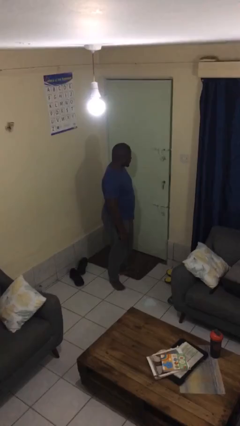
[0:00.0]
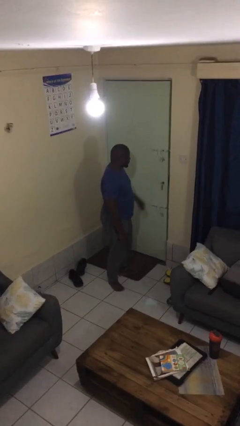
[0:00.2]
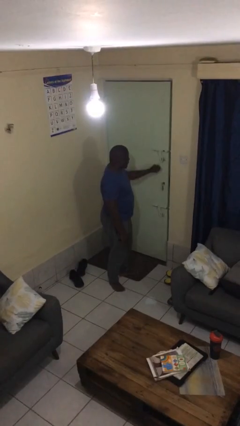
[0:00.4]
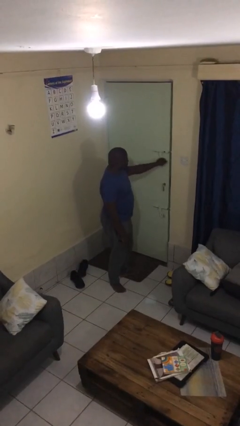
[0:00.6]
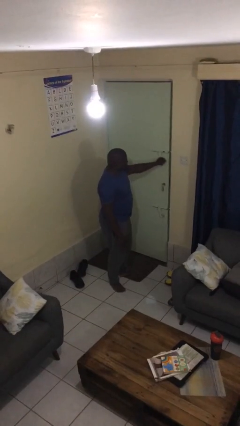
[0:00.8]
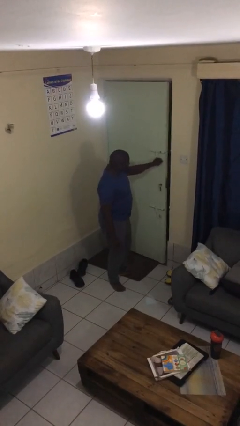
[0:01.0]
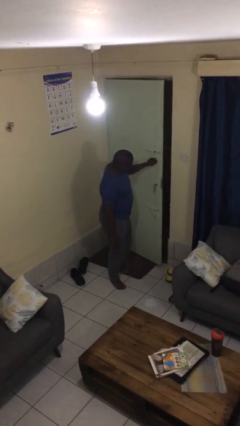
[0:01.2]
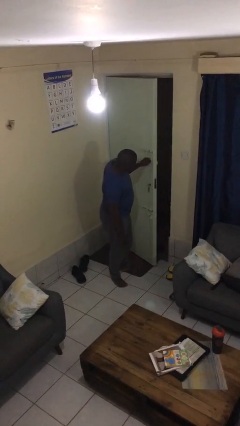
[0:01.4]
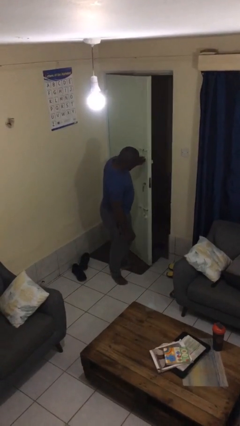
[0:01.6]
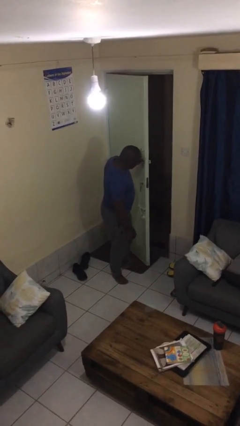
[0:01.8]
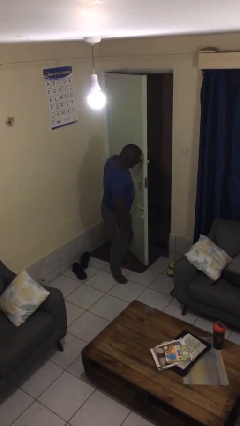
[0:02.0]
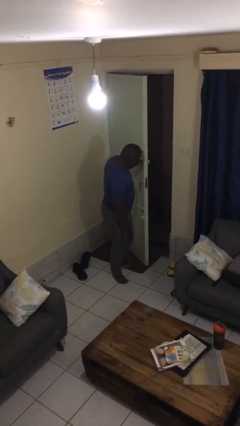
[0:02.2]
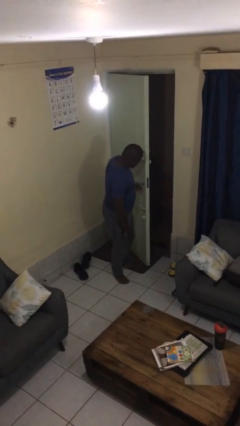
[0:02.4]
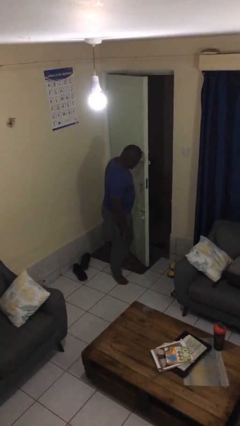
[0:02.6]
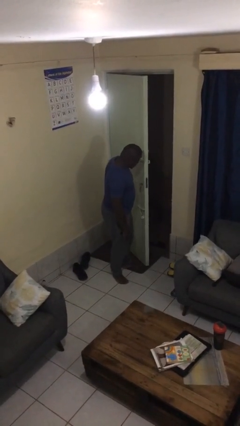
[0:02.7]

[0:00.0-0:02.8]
person opens facility door

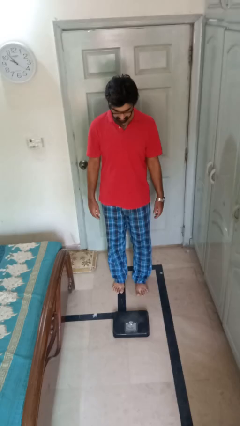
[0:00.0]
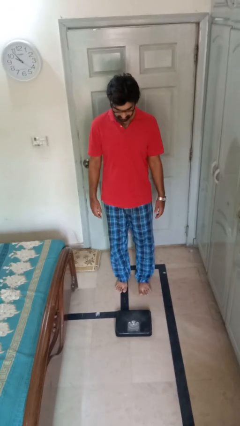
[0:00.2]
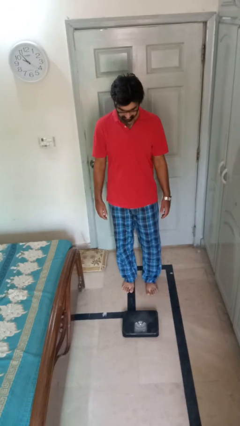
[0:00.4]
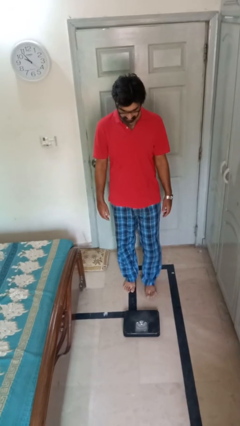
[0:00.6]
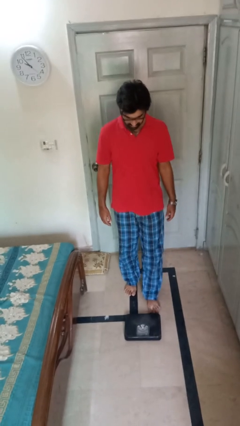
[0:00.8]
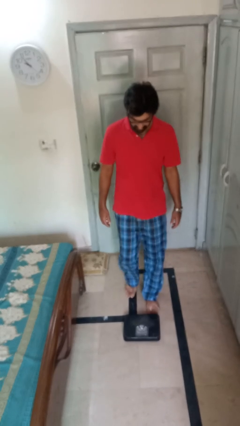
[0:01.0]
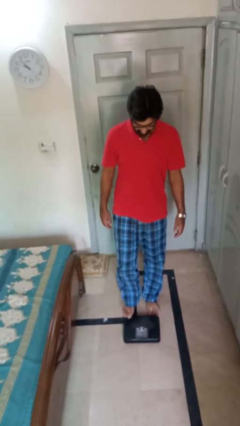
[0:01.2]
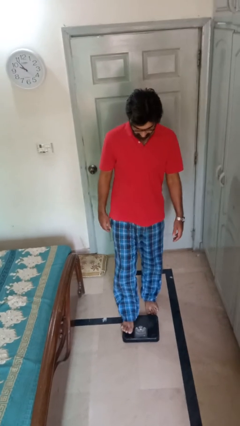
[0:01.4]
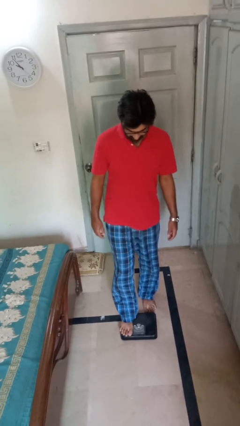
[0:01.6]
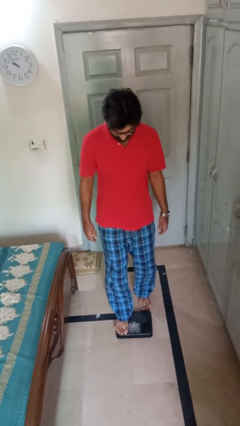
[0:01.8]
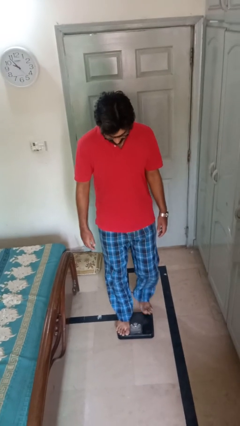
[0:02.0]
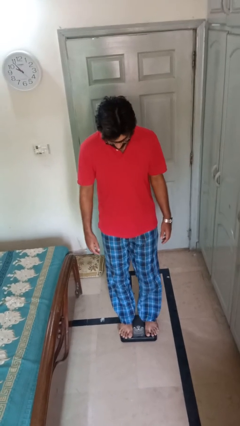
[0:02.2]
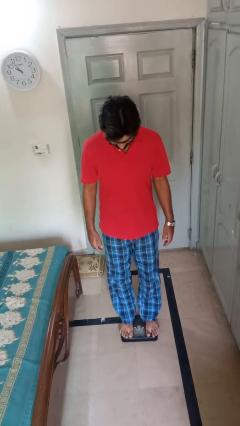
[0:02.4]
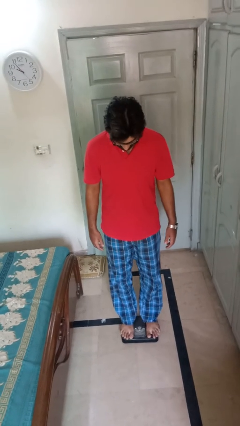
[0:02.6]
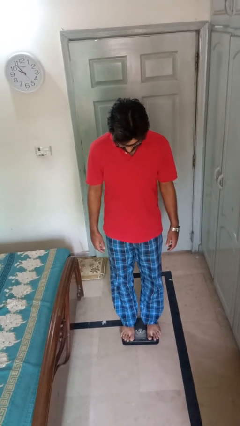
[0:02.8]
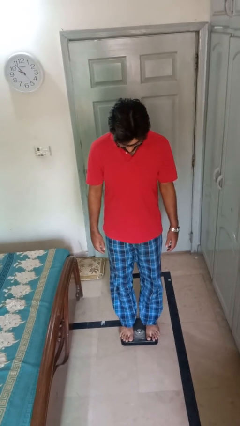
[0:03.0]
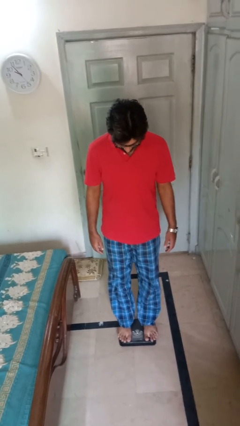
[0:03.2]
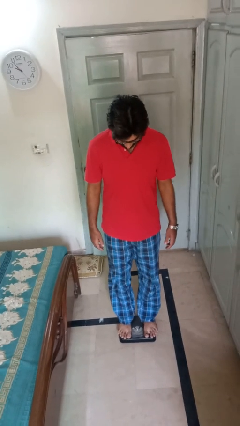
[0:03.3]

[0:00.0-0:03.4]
person uses bodyweight scale

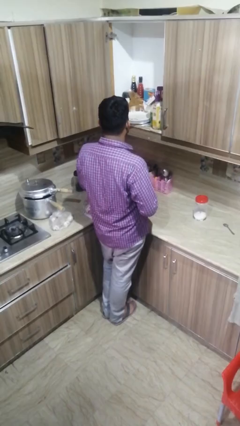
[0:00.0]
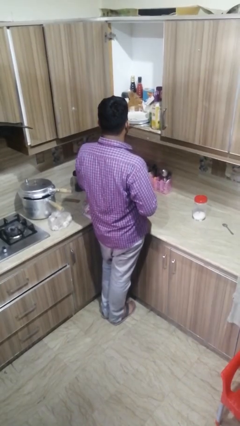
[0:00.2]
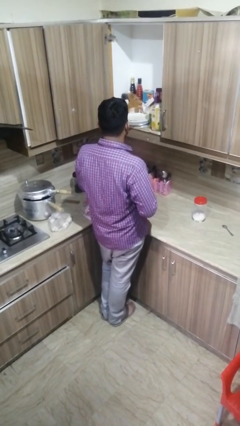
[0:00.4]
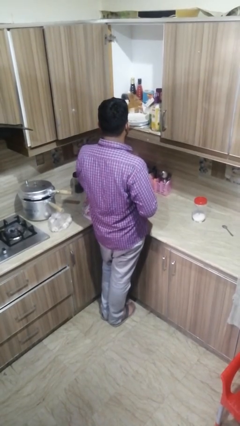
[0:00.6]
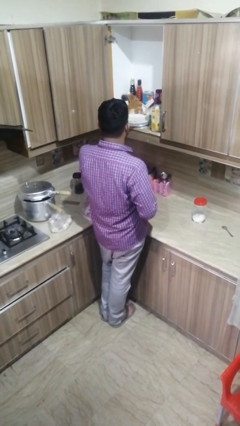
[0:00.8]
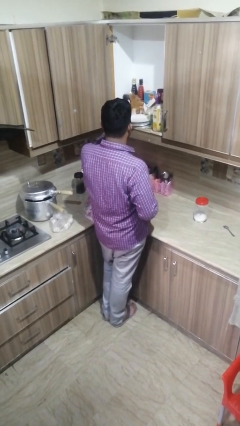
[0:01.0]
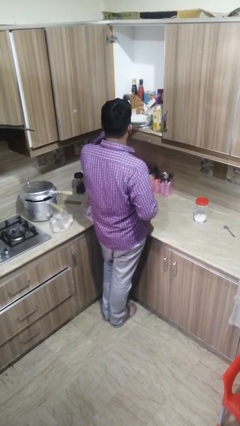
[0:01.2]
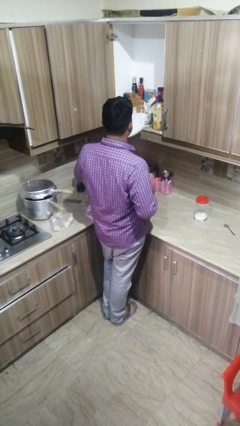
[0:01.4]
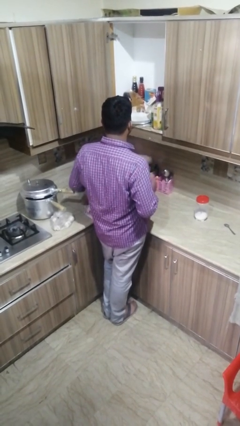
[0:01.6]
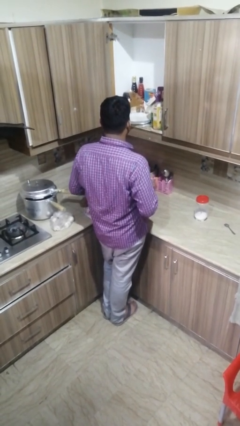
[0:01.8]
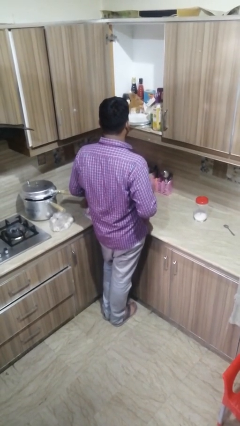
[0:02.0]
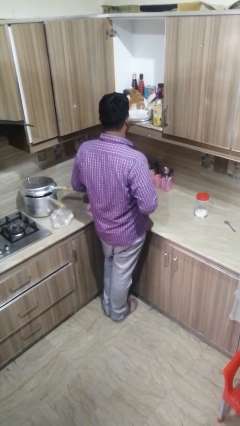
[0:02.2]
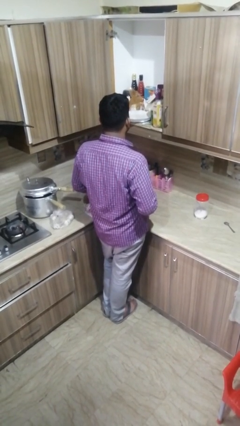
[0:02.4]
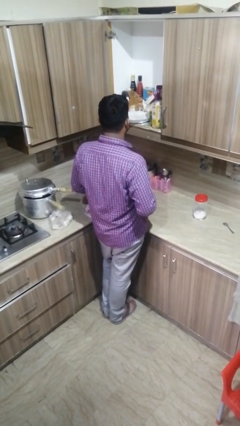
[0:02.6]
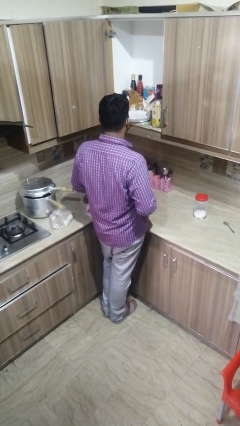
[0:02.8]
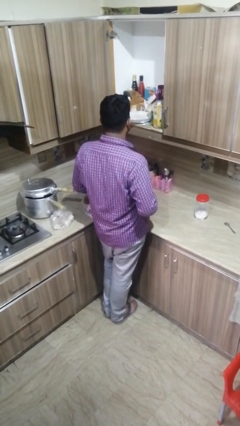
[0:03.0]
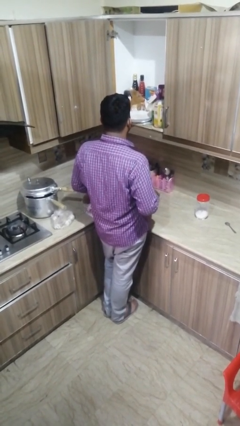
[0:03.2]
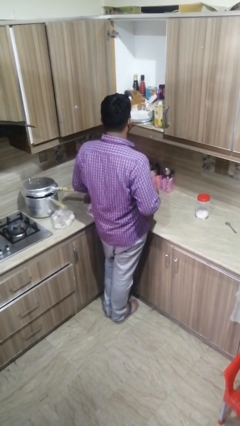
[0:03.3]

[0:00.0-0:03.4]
person takes object from cabinet

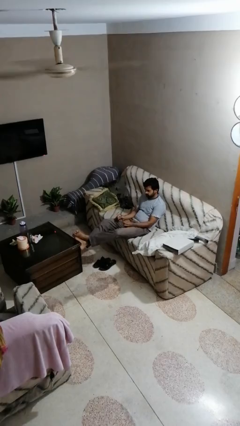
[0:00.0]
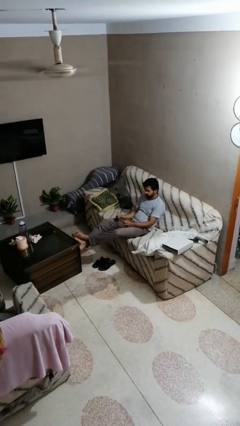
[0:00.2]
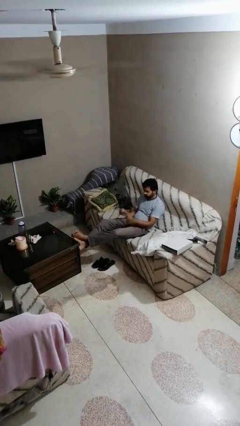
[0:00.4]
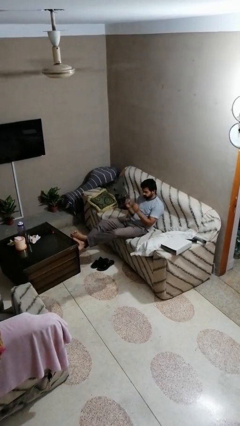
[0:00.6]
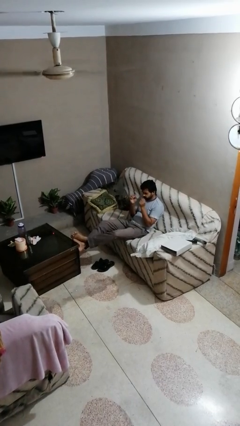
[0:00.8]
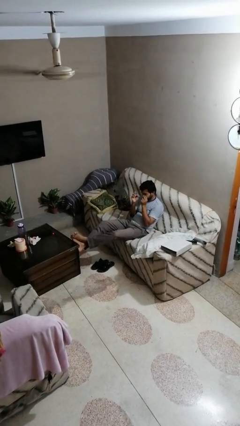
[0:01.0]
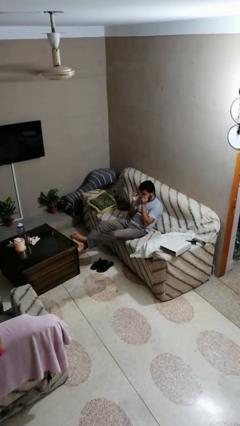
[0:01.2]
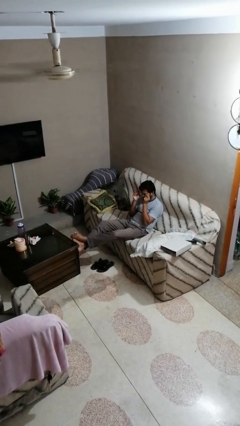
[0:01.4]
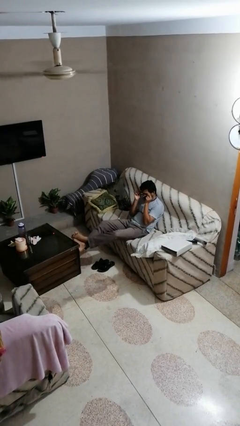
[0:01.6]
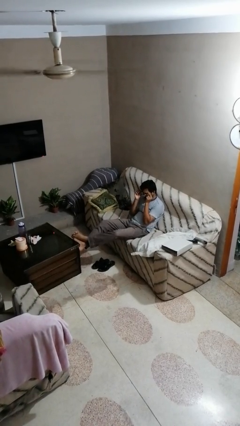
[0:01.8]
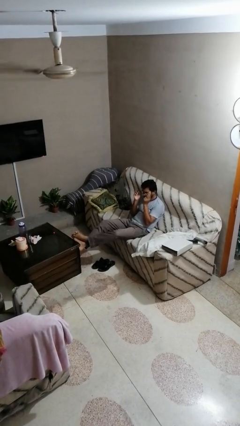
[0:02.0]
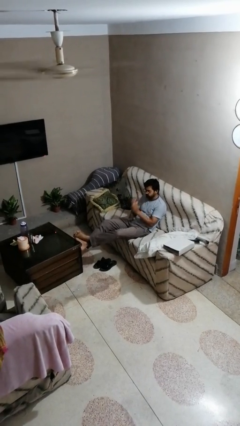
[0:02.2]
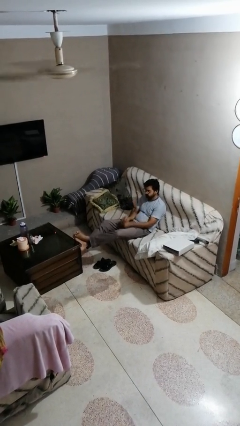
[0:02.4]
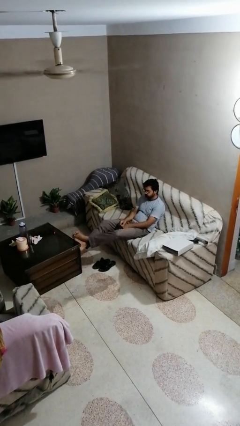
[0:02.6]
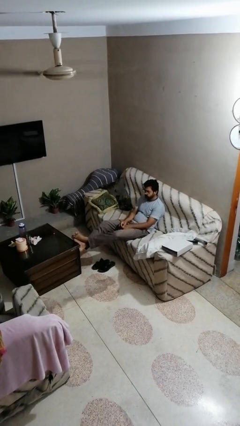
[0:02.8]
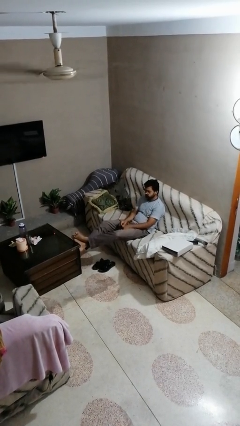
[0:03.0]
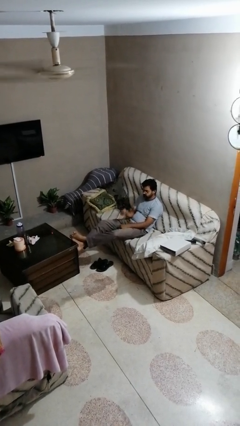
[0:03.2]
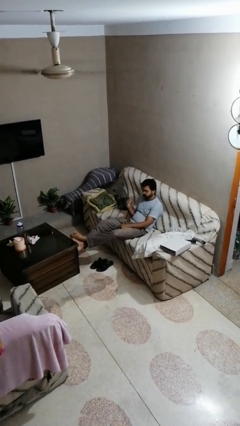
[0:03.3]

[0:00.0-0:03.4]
person puts on glasses

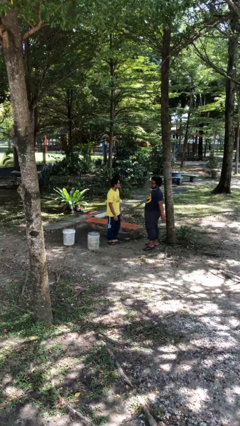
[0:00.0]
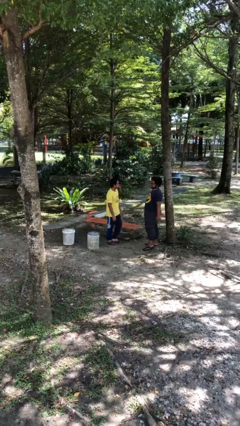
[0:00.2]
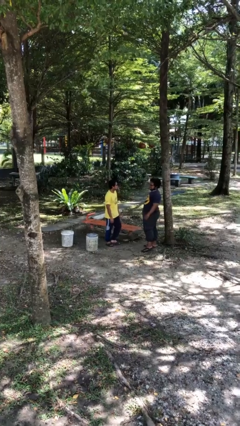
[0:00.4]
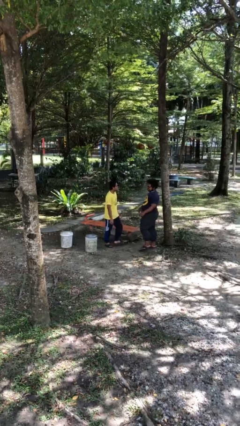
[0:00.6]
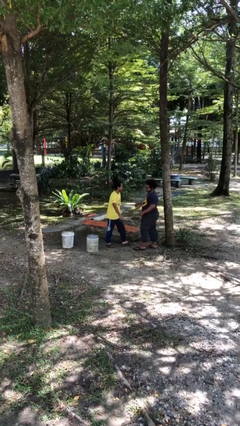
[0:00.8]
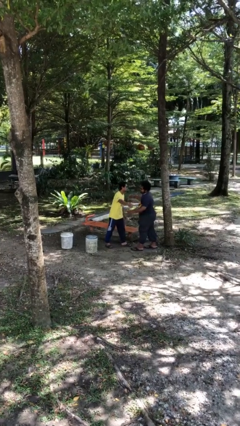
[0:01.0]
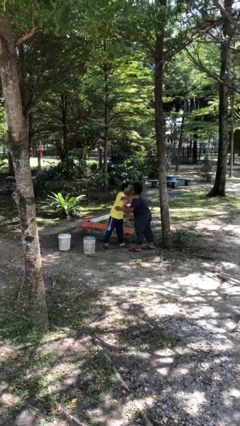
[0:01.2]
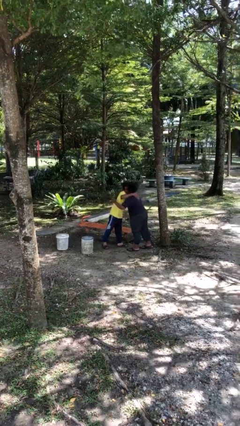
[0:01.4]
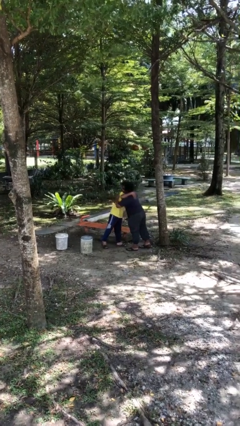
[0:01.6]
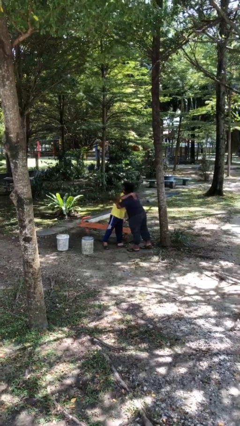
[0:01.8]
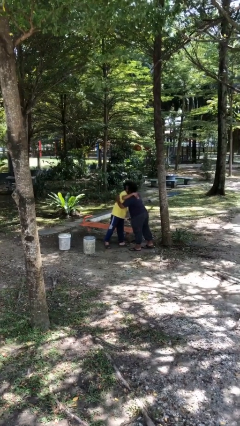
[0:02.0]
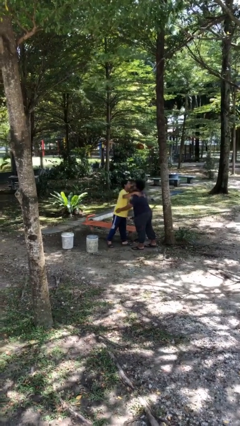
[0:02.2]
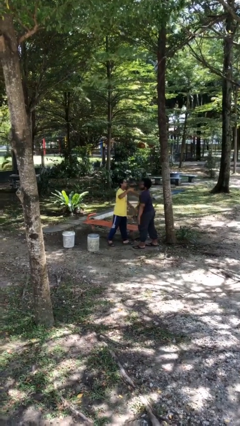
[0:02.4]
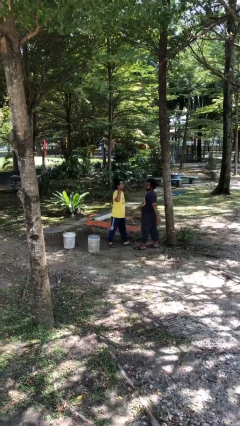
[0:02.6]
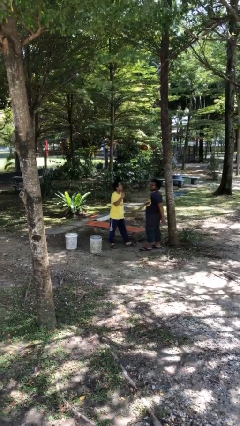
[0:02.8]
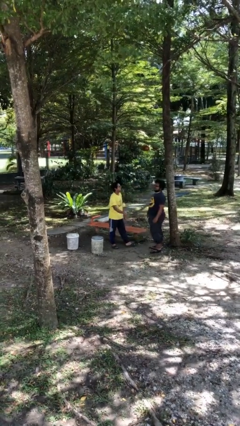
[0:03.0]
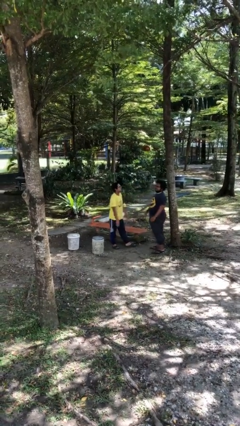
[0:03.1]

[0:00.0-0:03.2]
person embraces person

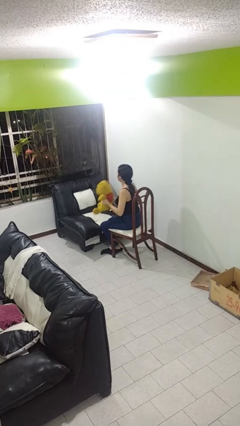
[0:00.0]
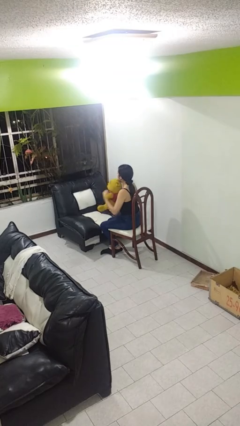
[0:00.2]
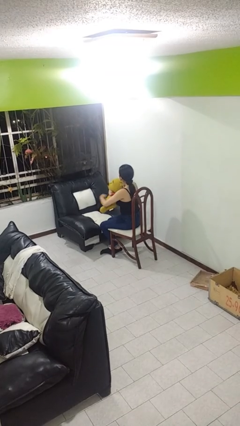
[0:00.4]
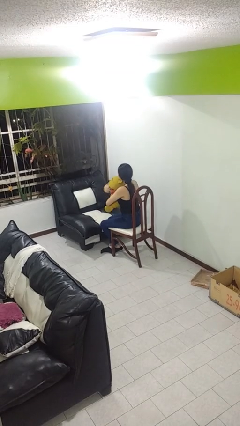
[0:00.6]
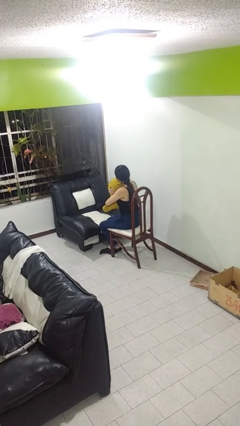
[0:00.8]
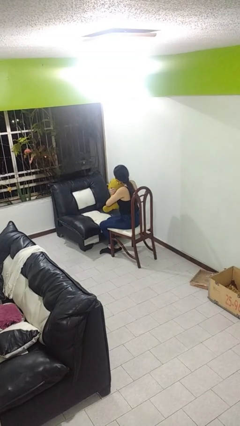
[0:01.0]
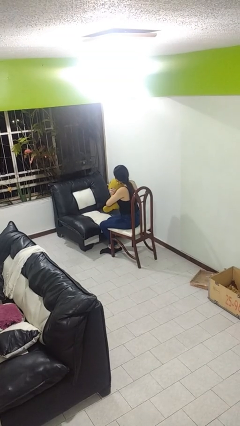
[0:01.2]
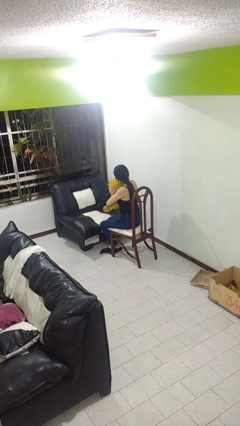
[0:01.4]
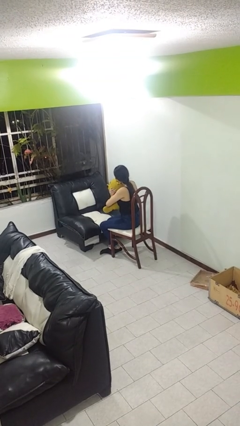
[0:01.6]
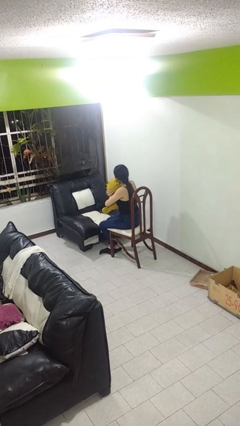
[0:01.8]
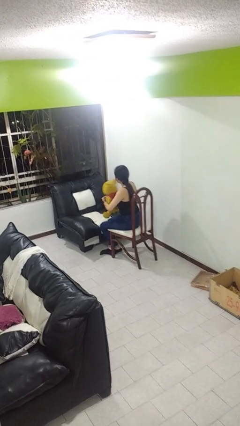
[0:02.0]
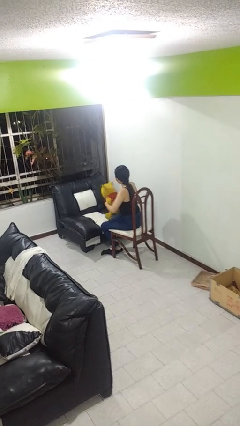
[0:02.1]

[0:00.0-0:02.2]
person hugs stuffed animal
